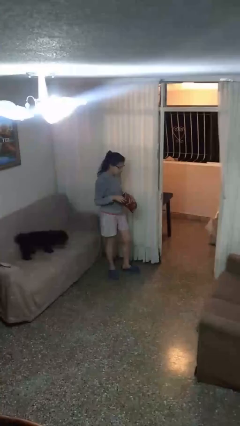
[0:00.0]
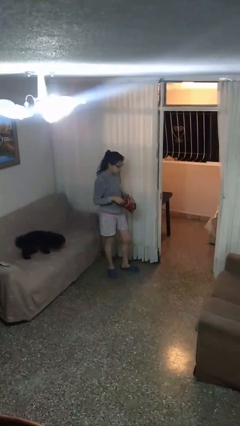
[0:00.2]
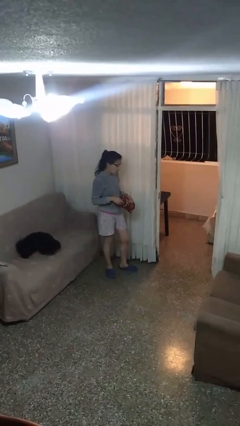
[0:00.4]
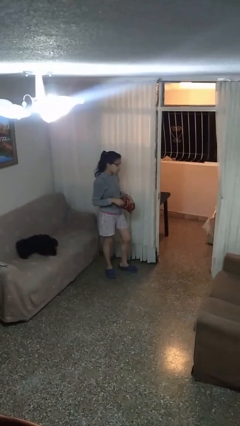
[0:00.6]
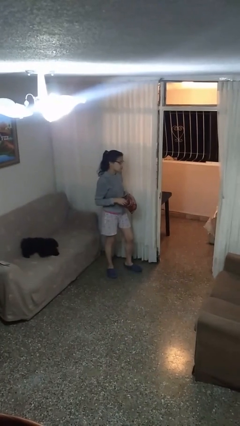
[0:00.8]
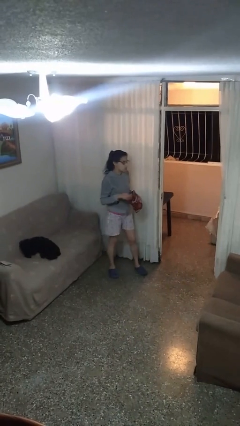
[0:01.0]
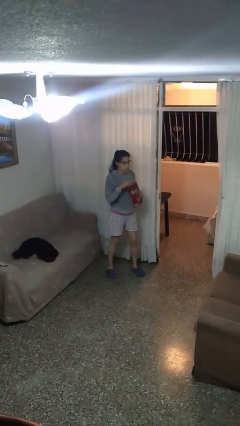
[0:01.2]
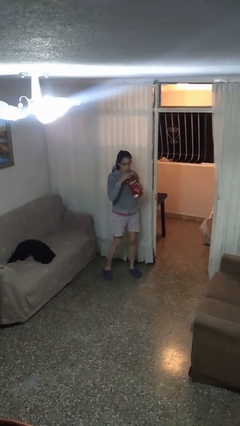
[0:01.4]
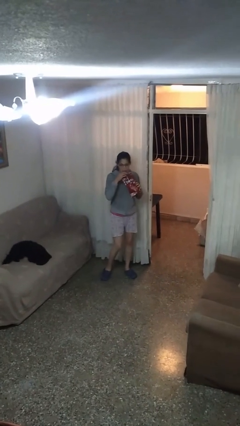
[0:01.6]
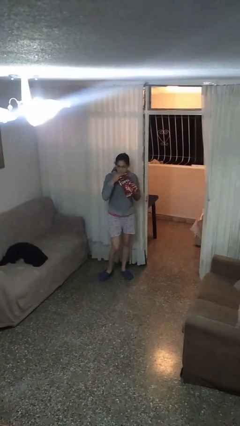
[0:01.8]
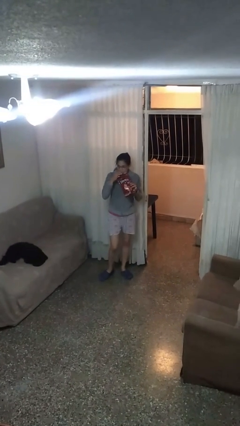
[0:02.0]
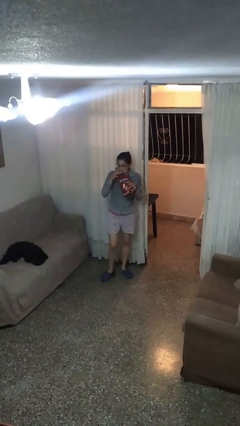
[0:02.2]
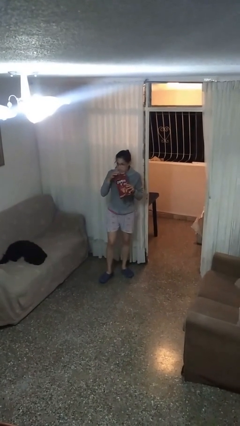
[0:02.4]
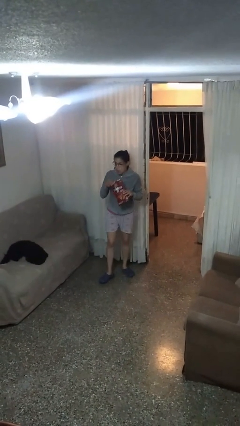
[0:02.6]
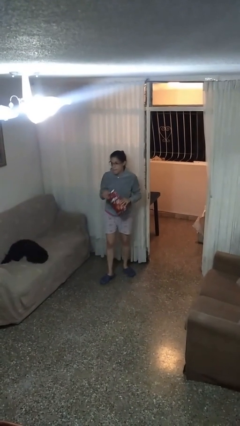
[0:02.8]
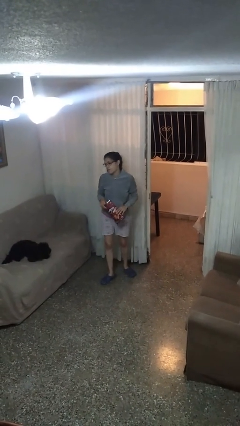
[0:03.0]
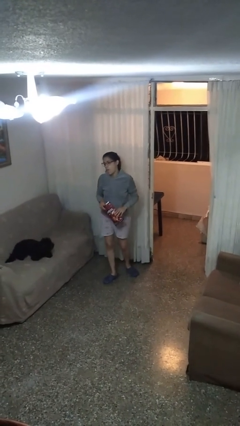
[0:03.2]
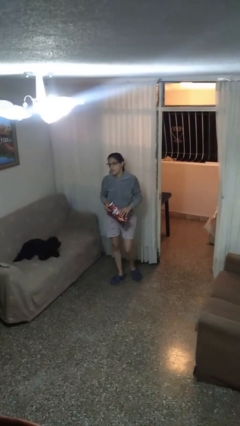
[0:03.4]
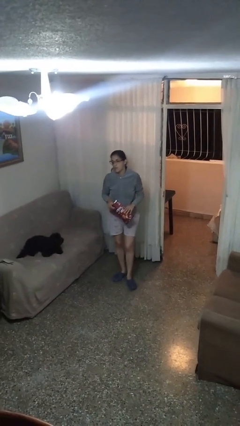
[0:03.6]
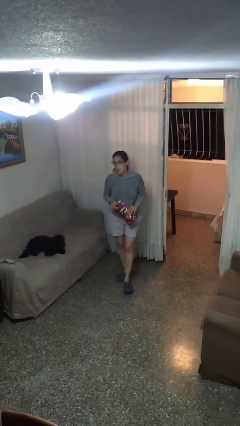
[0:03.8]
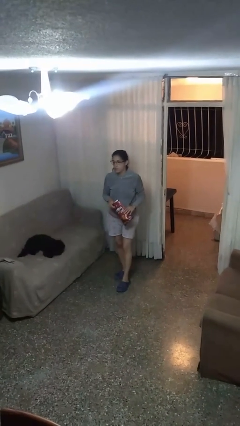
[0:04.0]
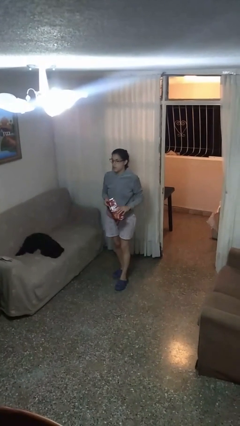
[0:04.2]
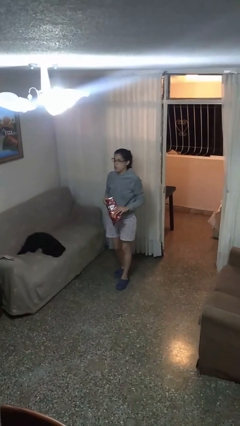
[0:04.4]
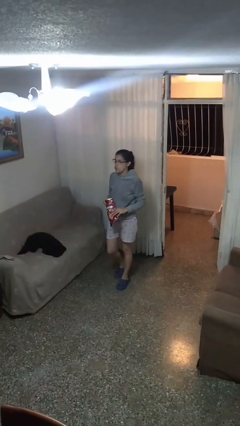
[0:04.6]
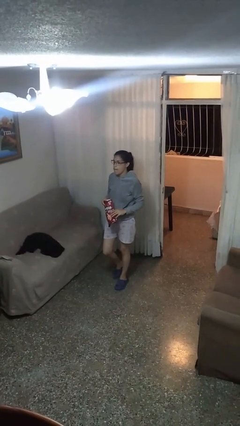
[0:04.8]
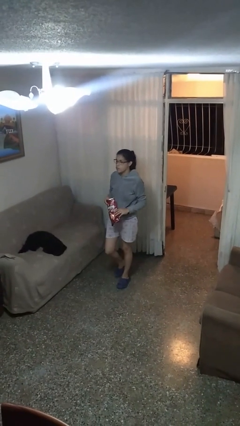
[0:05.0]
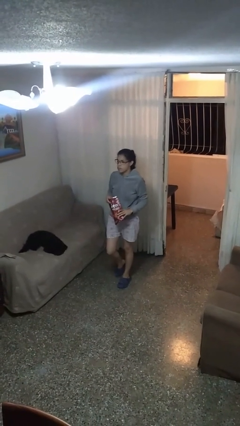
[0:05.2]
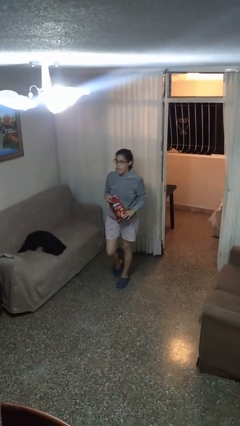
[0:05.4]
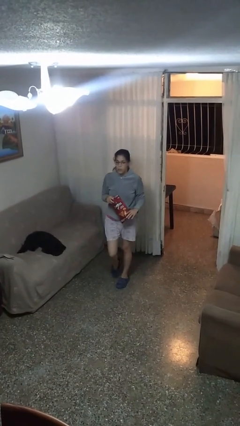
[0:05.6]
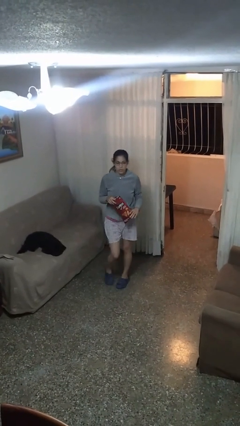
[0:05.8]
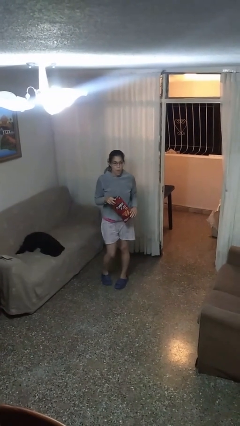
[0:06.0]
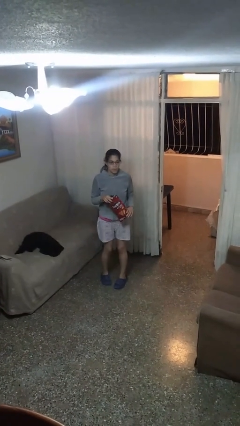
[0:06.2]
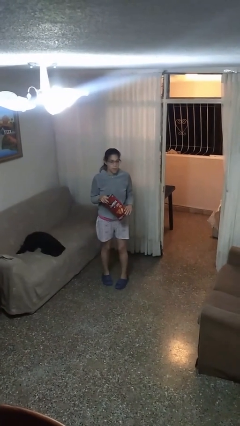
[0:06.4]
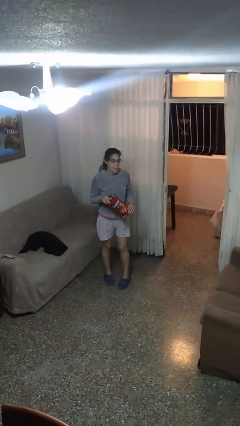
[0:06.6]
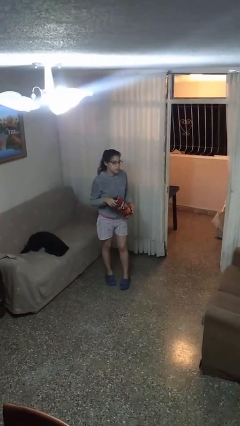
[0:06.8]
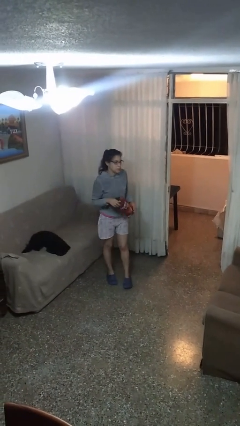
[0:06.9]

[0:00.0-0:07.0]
person eats snack from bag

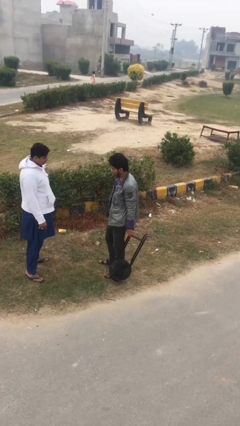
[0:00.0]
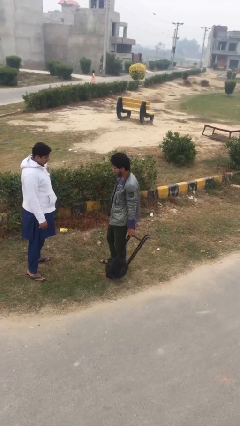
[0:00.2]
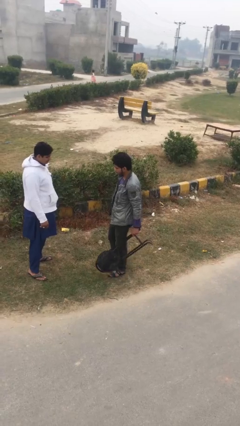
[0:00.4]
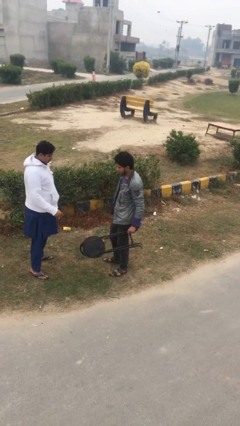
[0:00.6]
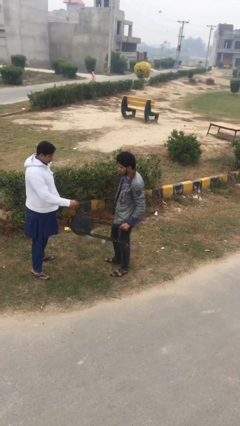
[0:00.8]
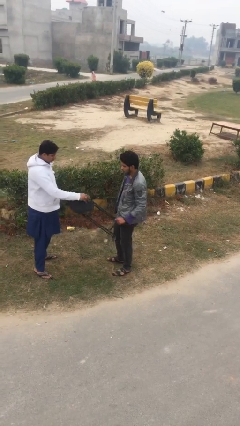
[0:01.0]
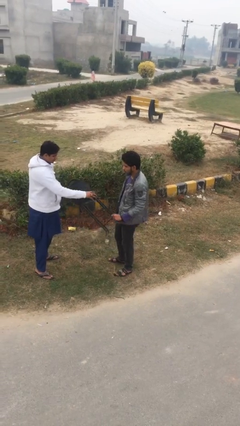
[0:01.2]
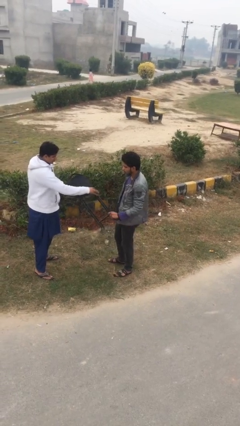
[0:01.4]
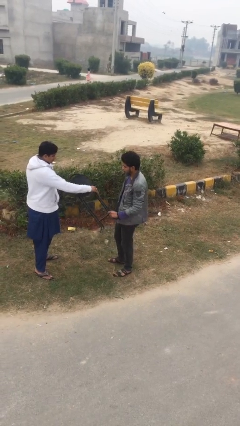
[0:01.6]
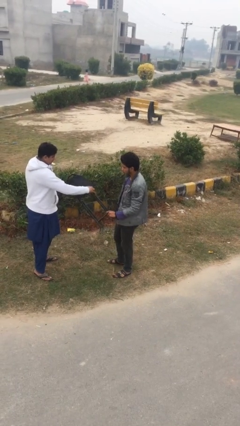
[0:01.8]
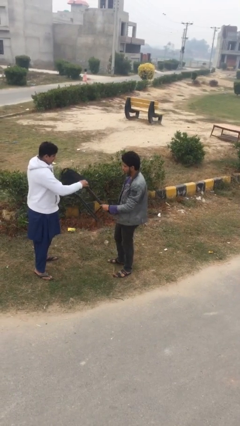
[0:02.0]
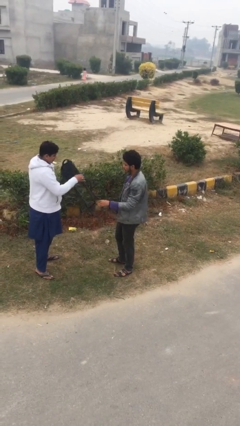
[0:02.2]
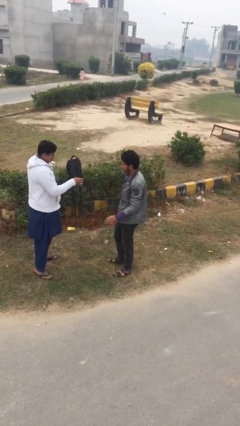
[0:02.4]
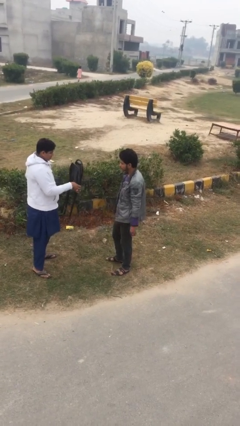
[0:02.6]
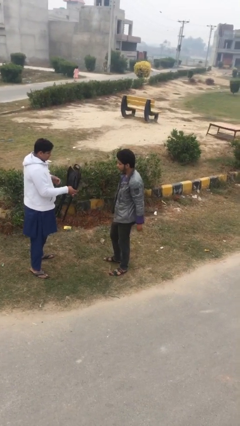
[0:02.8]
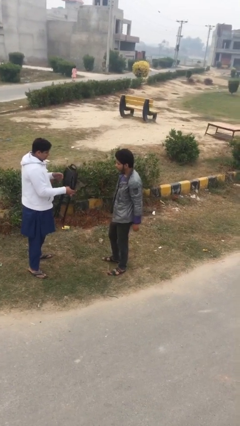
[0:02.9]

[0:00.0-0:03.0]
person transfers object to person

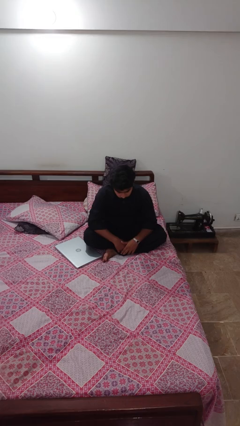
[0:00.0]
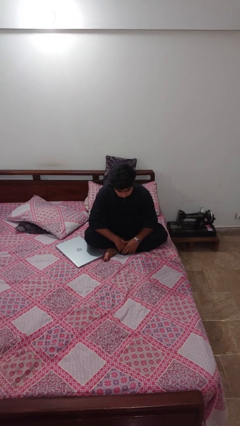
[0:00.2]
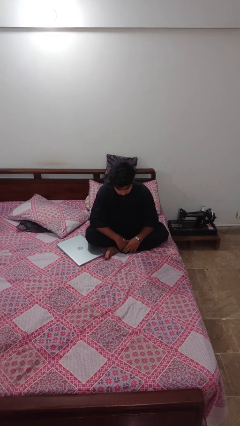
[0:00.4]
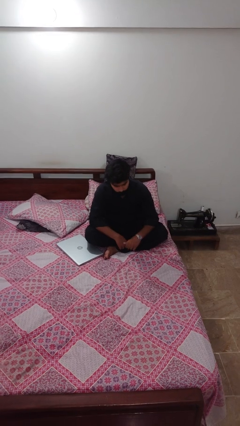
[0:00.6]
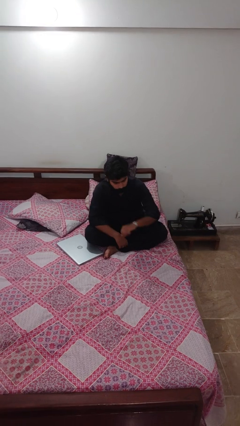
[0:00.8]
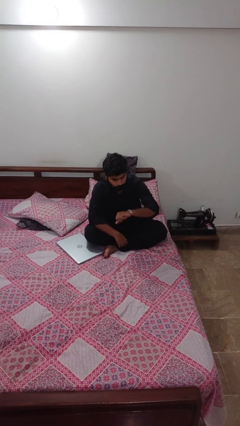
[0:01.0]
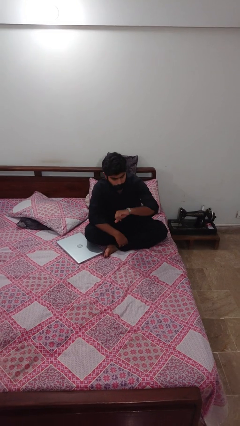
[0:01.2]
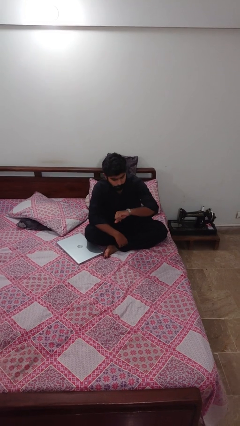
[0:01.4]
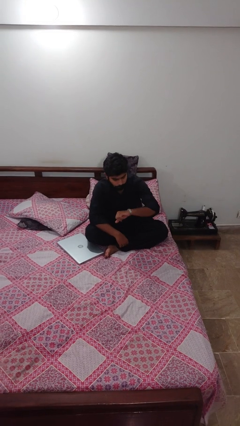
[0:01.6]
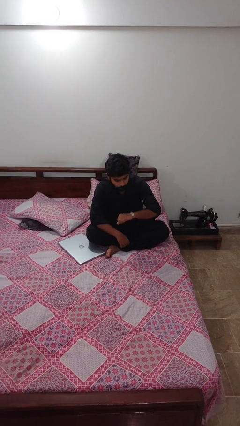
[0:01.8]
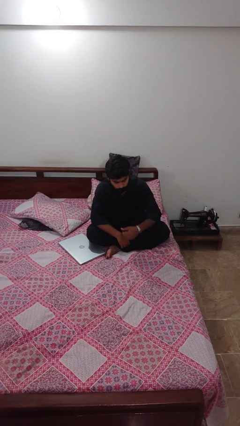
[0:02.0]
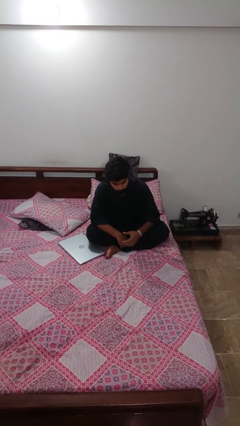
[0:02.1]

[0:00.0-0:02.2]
person looks at wristwatch

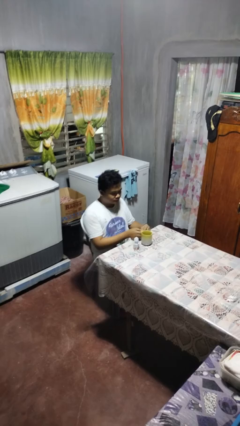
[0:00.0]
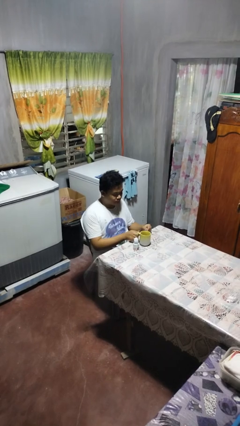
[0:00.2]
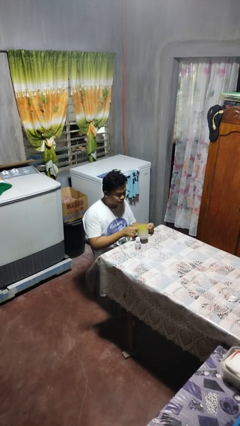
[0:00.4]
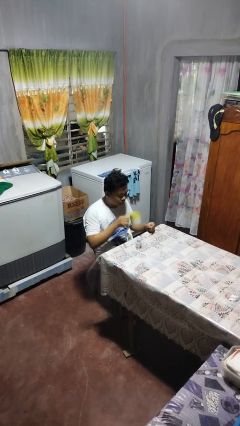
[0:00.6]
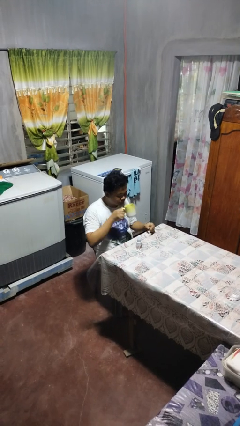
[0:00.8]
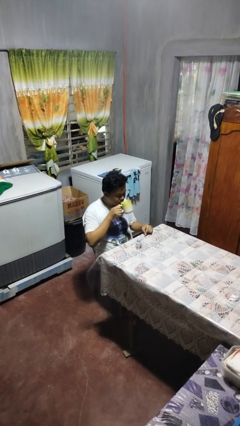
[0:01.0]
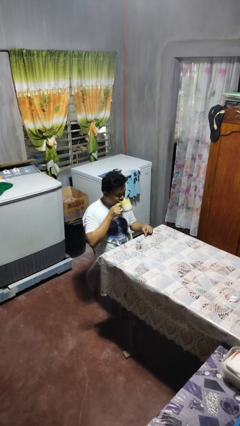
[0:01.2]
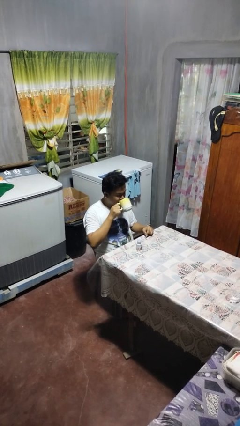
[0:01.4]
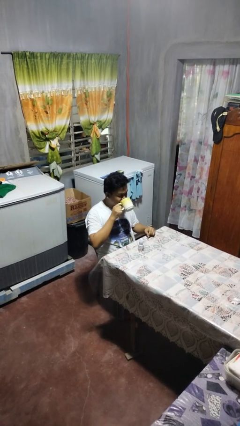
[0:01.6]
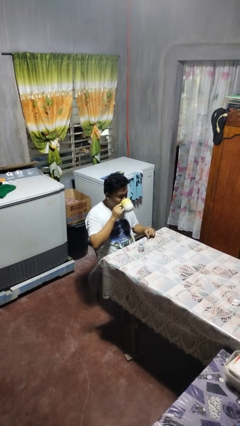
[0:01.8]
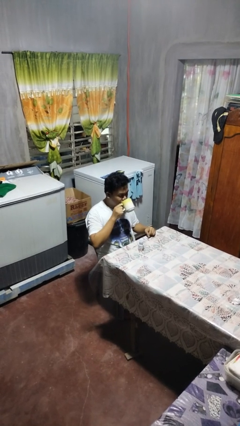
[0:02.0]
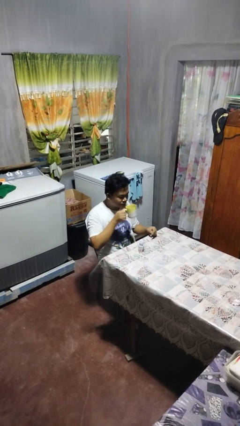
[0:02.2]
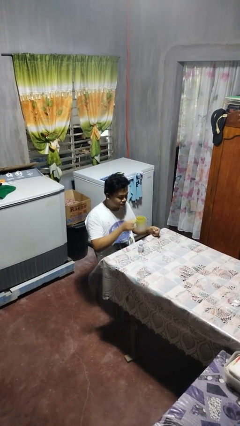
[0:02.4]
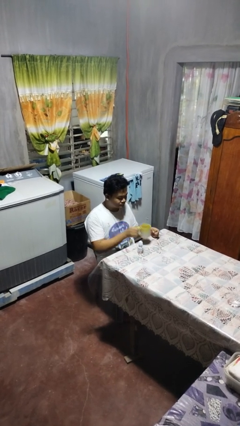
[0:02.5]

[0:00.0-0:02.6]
person drinks from cup

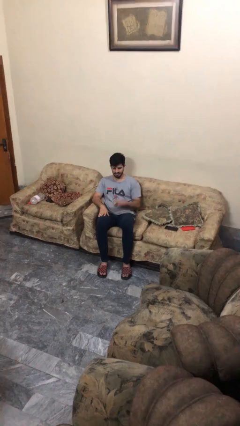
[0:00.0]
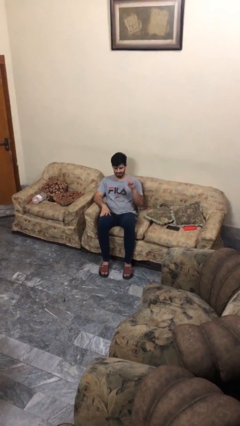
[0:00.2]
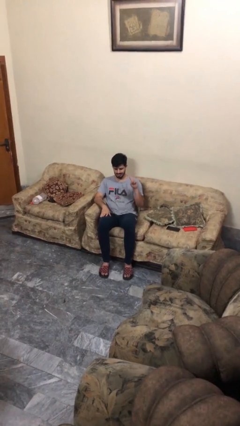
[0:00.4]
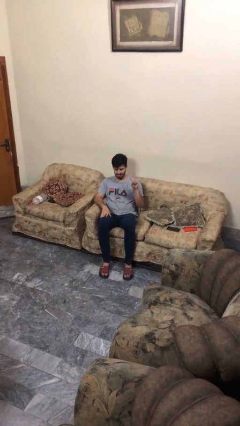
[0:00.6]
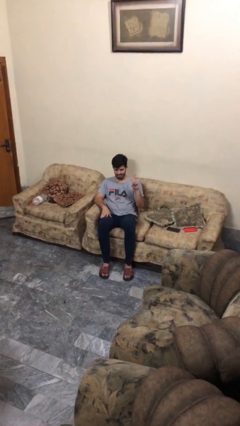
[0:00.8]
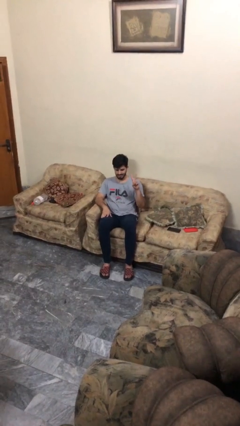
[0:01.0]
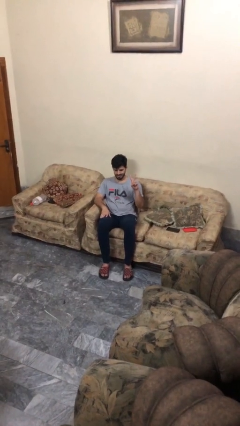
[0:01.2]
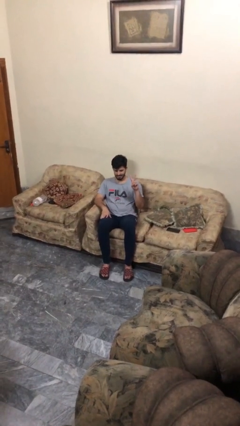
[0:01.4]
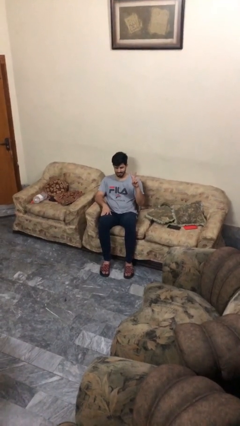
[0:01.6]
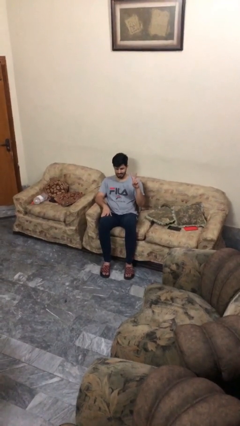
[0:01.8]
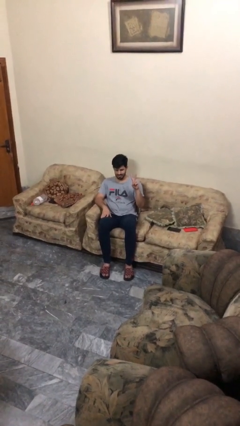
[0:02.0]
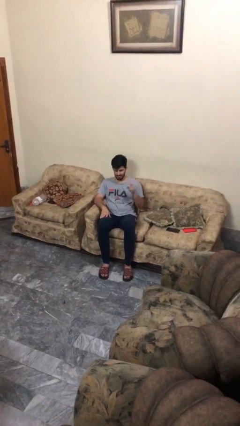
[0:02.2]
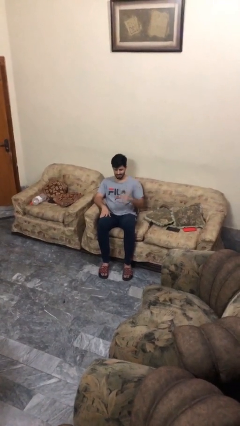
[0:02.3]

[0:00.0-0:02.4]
person gestures peace

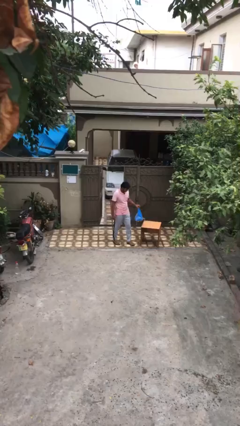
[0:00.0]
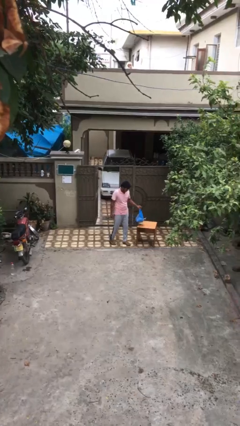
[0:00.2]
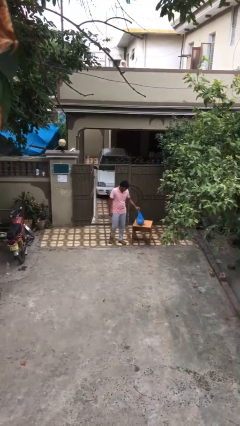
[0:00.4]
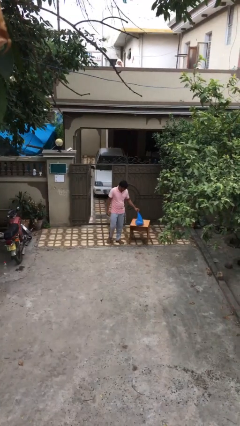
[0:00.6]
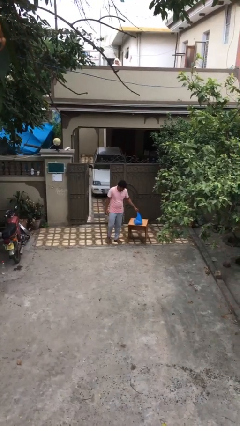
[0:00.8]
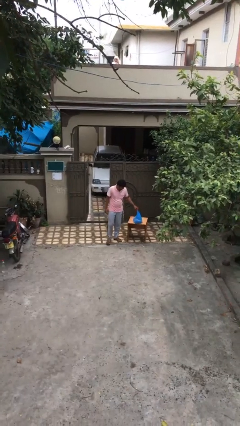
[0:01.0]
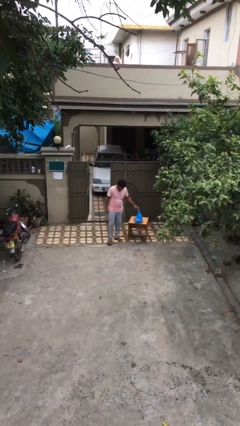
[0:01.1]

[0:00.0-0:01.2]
person puts down object on table
